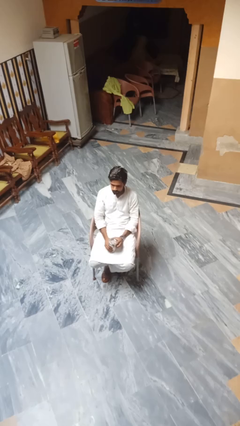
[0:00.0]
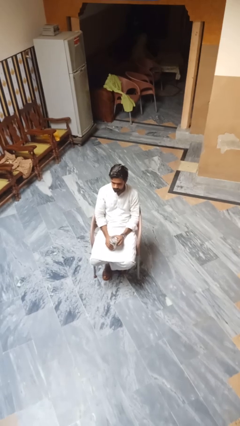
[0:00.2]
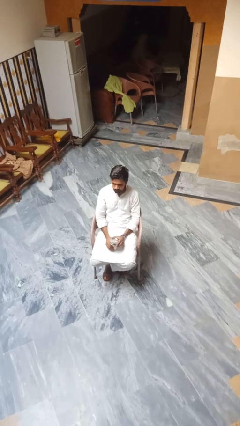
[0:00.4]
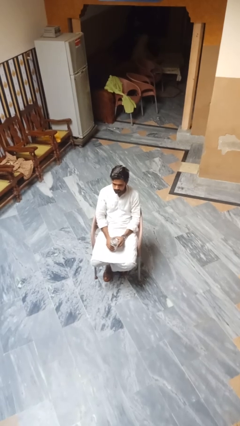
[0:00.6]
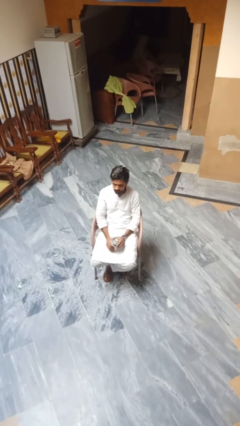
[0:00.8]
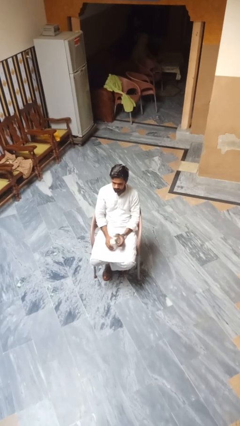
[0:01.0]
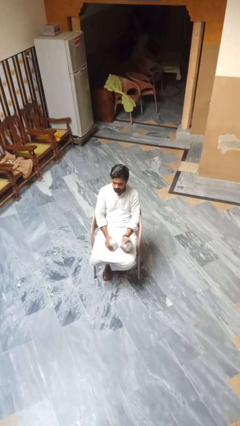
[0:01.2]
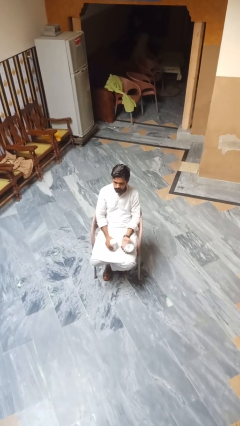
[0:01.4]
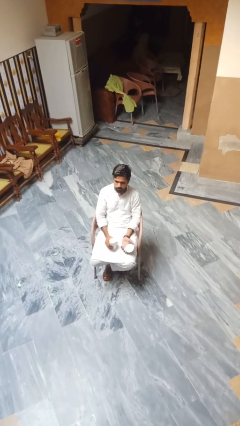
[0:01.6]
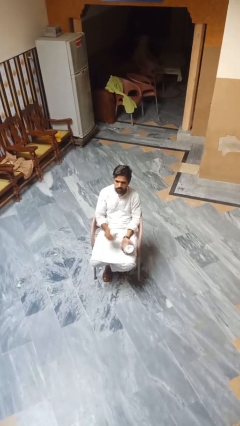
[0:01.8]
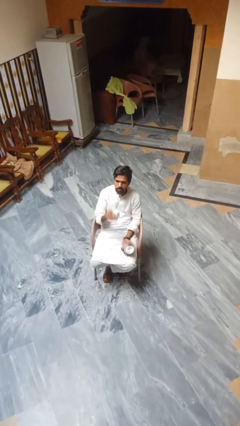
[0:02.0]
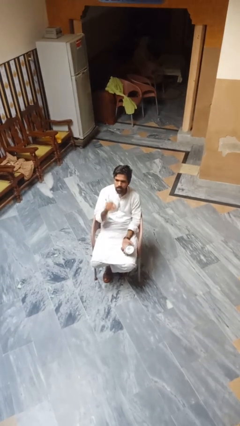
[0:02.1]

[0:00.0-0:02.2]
person opens beverage can

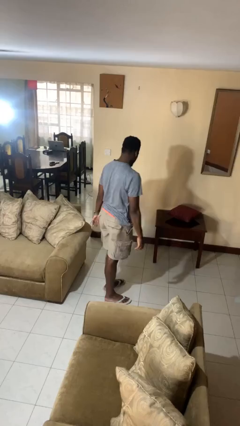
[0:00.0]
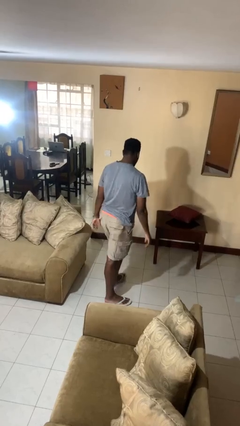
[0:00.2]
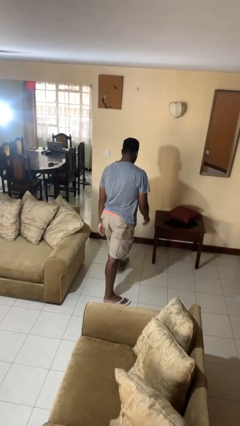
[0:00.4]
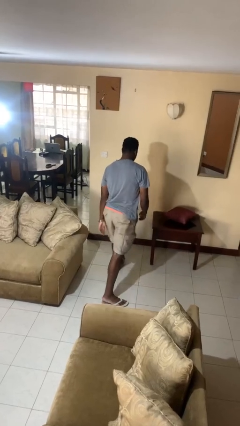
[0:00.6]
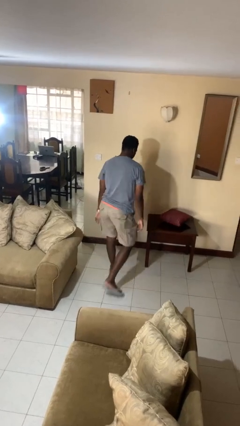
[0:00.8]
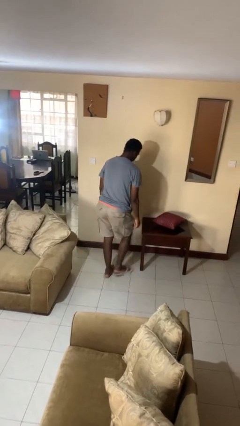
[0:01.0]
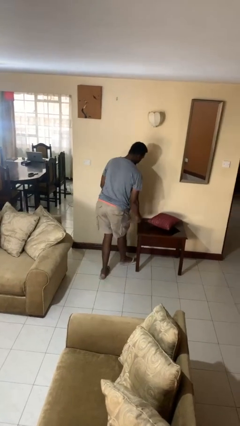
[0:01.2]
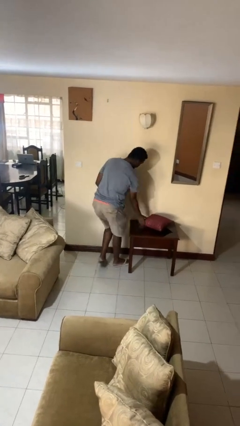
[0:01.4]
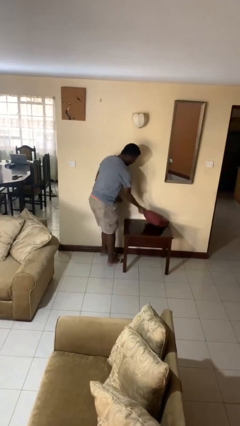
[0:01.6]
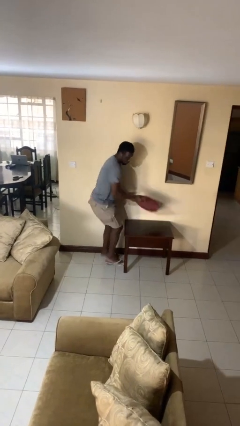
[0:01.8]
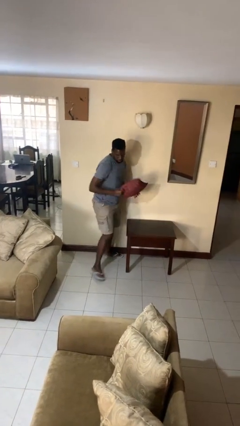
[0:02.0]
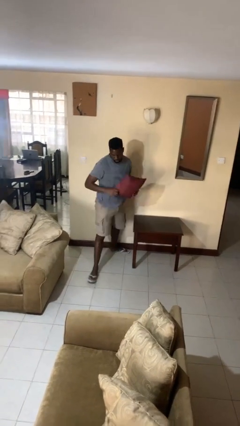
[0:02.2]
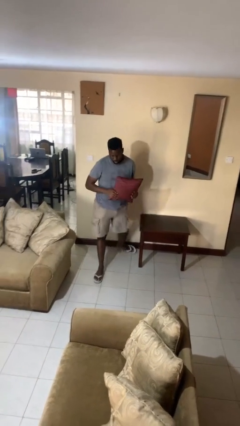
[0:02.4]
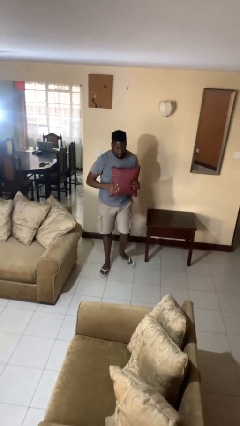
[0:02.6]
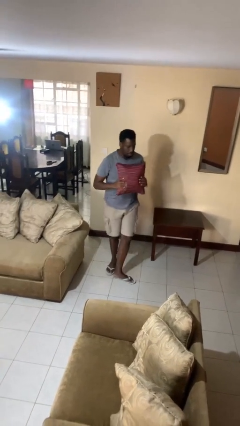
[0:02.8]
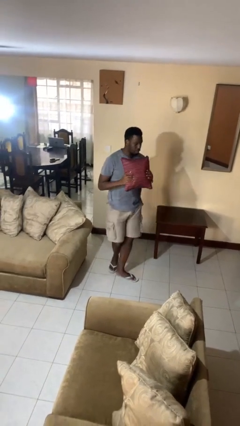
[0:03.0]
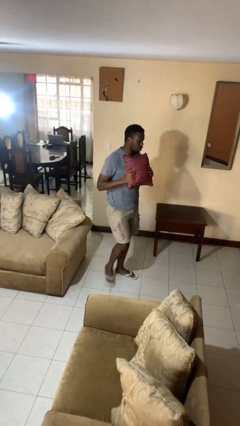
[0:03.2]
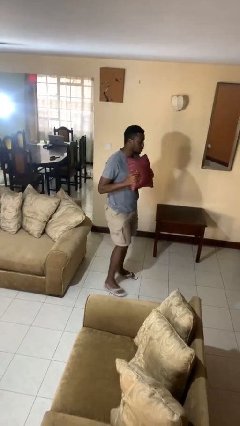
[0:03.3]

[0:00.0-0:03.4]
person picks up object from table

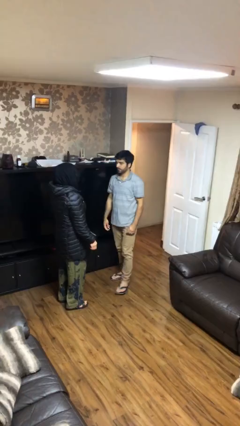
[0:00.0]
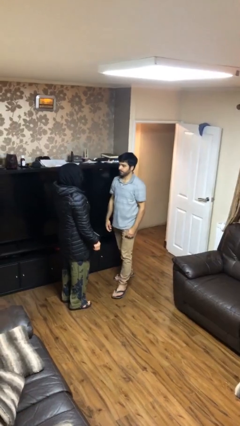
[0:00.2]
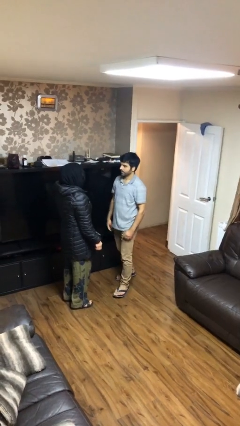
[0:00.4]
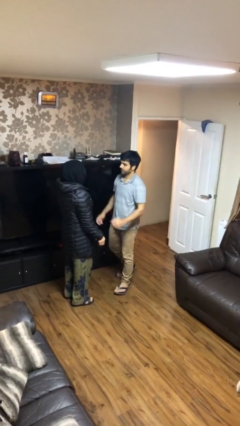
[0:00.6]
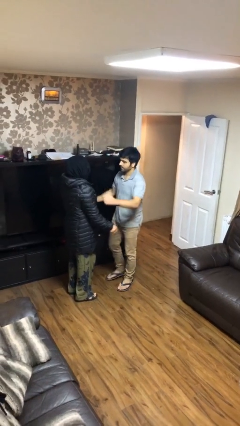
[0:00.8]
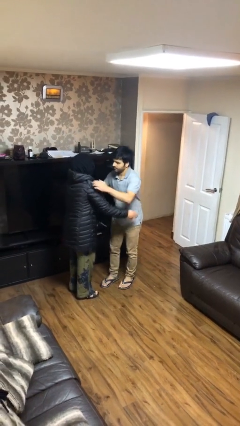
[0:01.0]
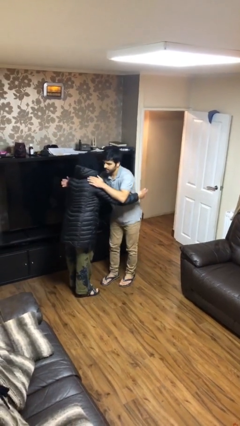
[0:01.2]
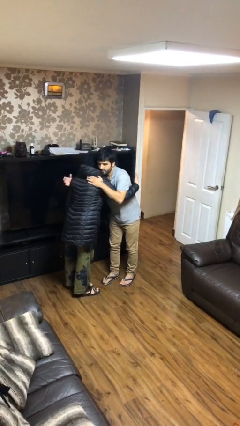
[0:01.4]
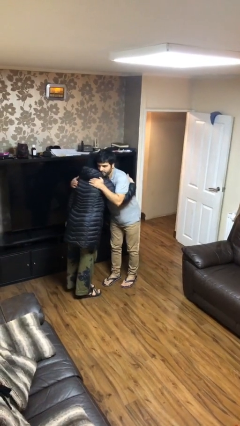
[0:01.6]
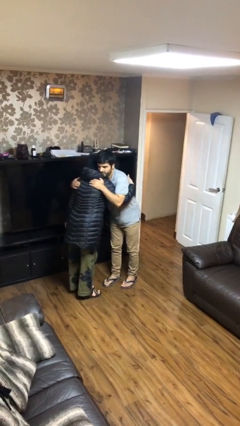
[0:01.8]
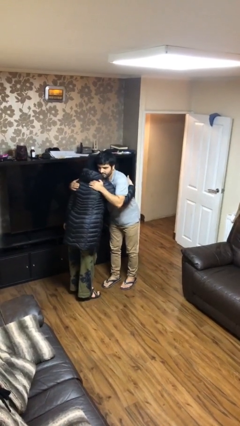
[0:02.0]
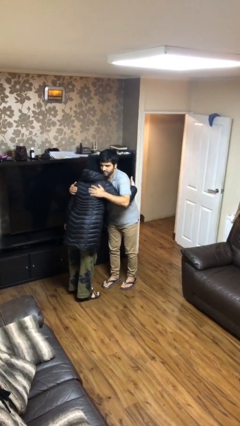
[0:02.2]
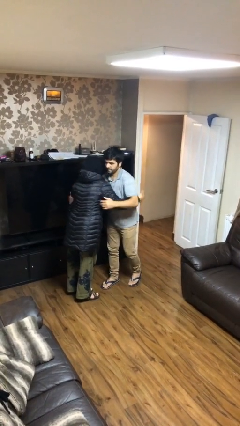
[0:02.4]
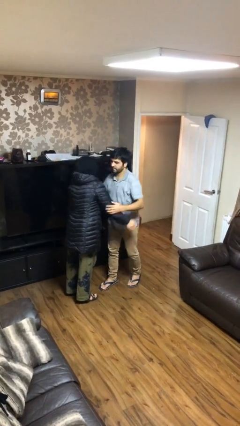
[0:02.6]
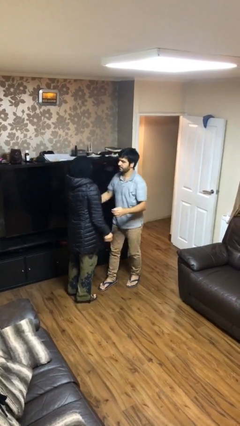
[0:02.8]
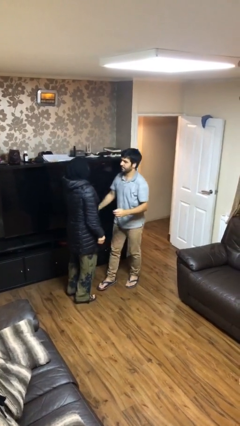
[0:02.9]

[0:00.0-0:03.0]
person embraces person

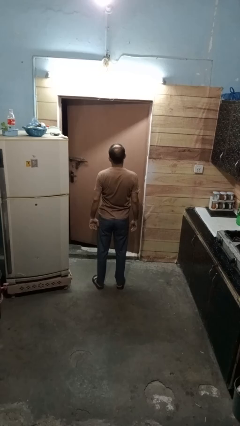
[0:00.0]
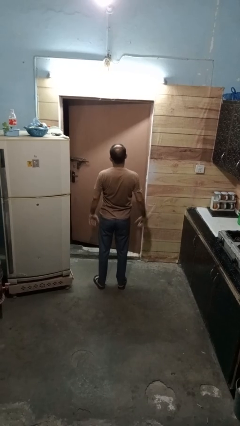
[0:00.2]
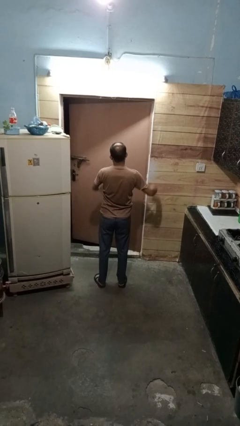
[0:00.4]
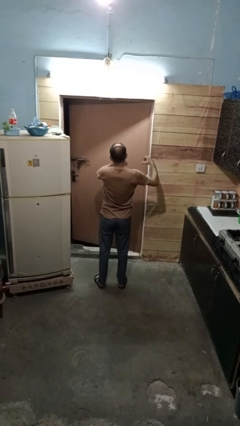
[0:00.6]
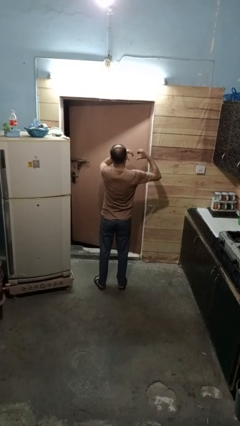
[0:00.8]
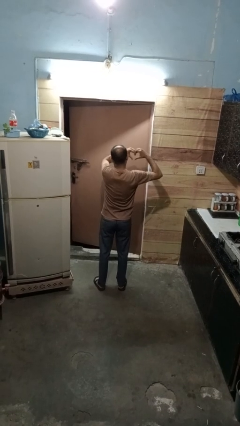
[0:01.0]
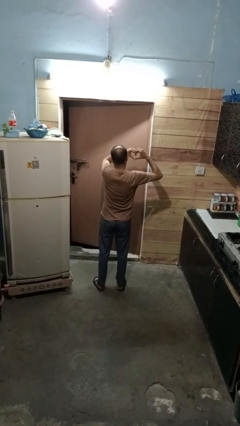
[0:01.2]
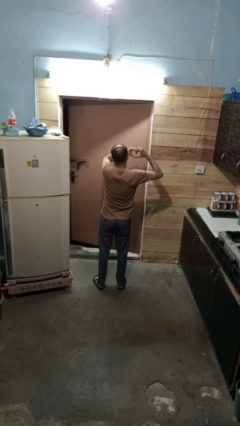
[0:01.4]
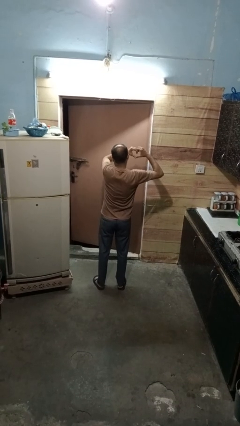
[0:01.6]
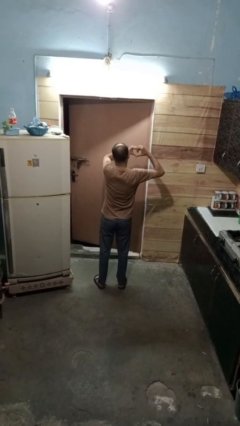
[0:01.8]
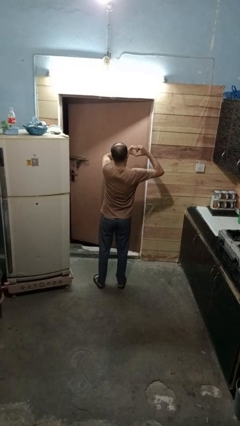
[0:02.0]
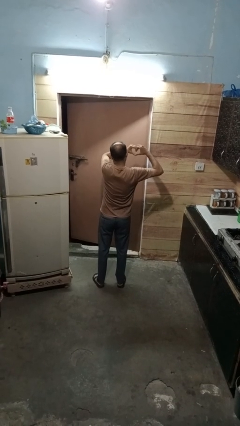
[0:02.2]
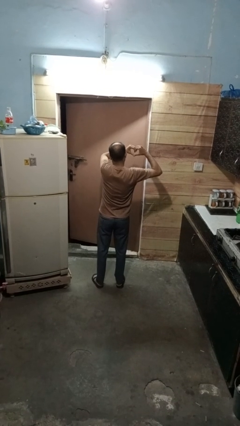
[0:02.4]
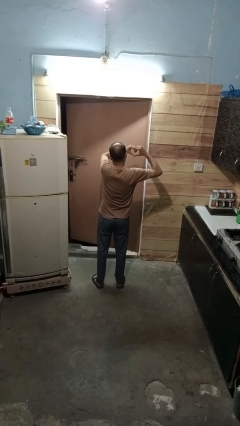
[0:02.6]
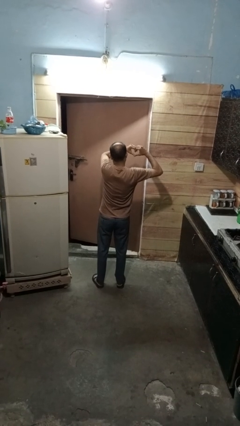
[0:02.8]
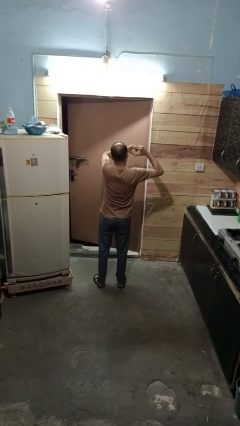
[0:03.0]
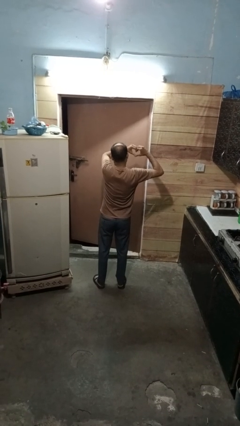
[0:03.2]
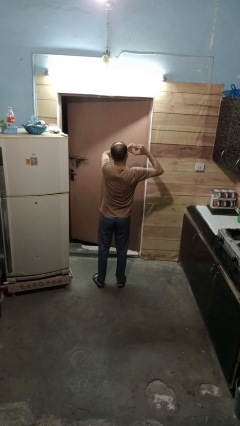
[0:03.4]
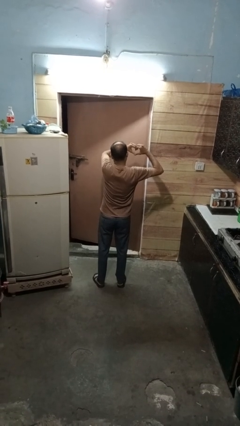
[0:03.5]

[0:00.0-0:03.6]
person gestures heart

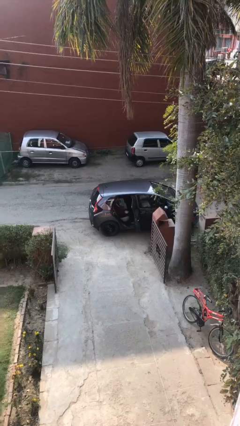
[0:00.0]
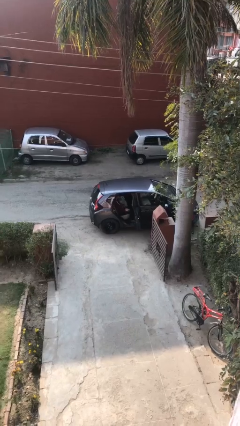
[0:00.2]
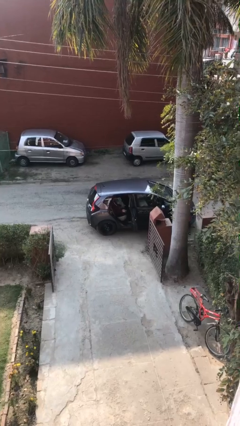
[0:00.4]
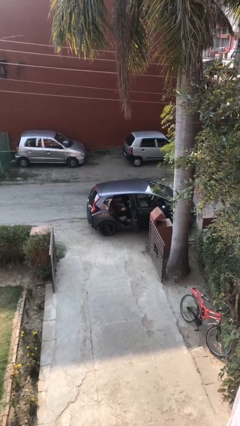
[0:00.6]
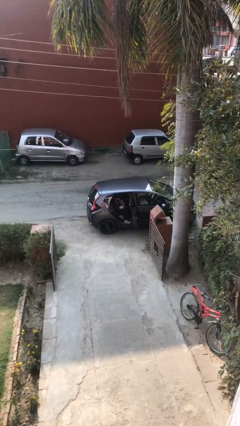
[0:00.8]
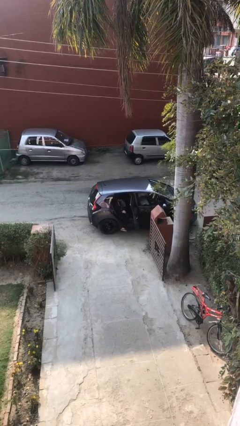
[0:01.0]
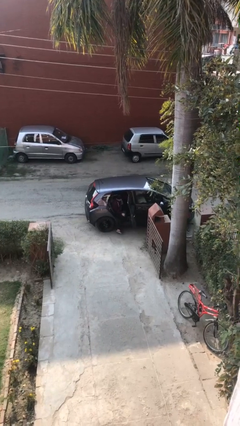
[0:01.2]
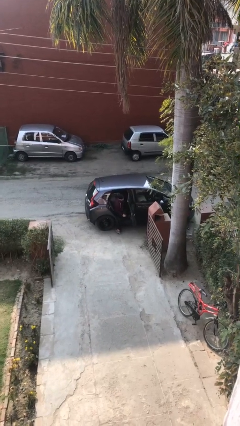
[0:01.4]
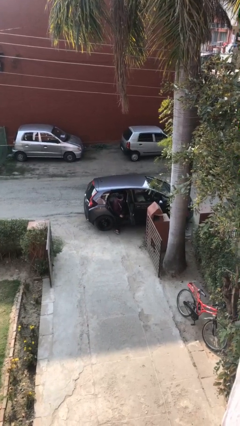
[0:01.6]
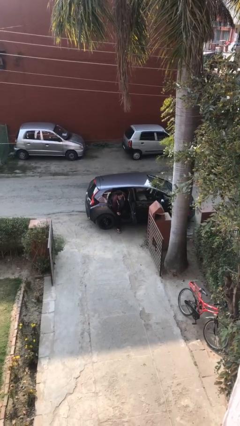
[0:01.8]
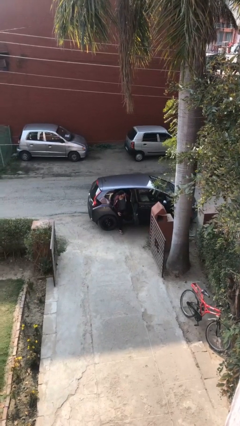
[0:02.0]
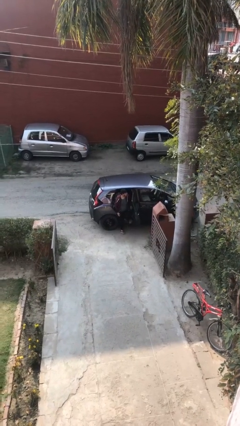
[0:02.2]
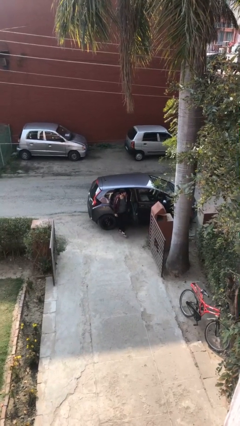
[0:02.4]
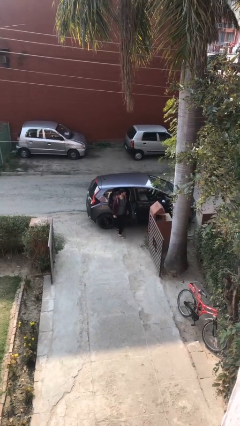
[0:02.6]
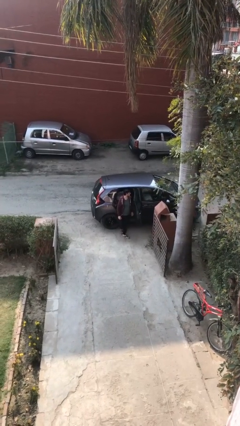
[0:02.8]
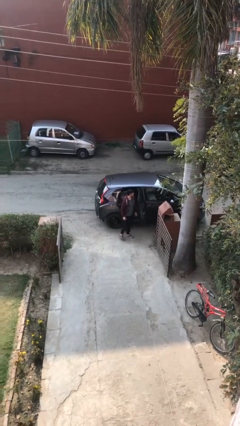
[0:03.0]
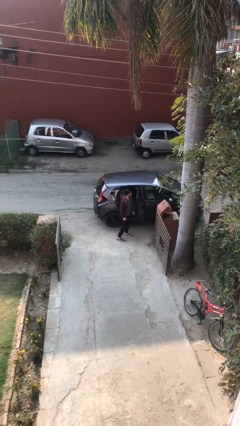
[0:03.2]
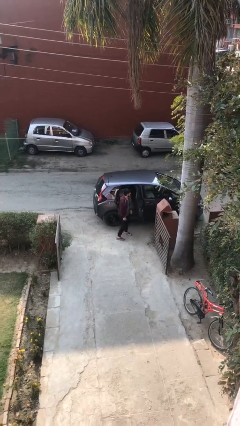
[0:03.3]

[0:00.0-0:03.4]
person exits car

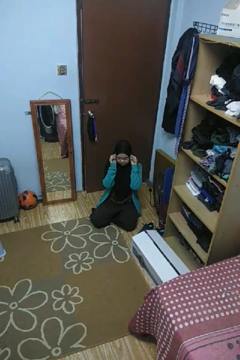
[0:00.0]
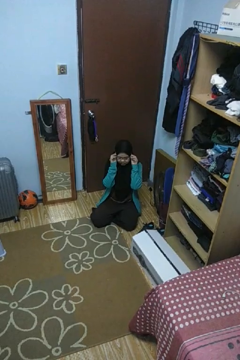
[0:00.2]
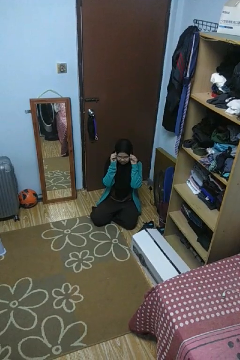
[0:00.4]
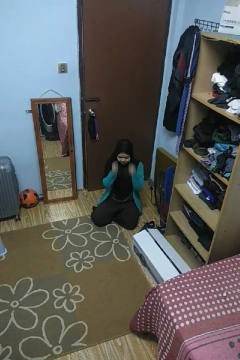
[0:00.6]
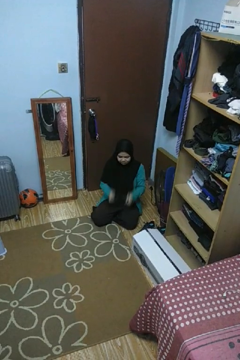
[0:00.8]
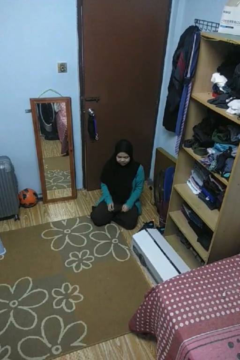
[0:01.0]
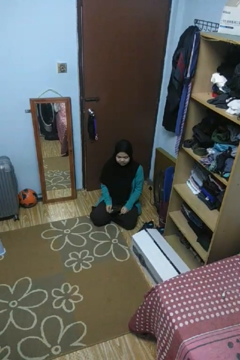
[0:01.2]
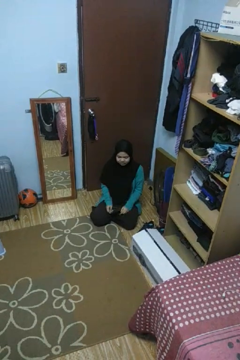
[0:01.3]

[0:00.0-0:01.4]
person takes off glasses

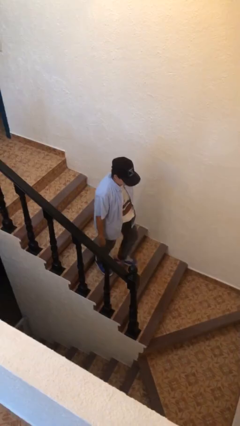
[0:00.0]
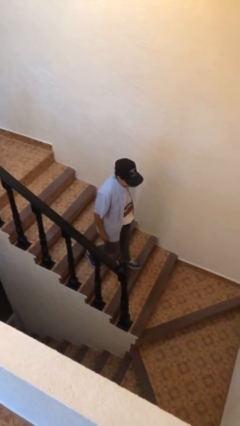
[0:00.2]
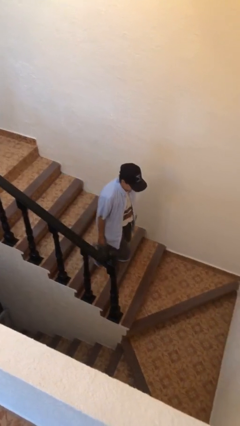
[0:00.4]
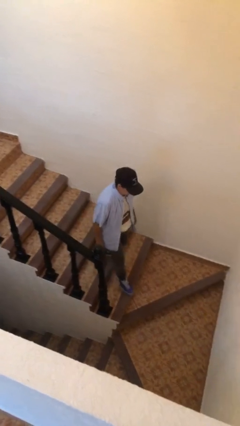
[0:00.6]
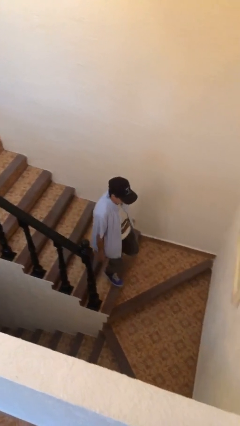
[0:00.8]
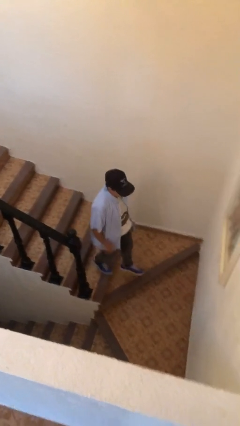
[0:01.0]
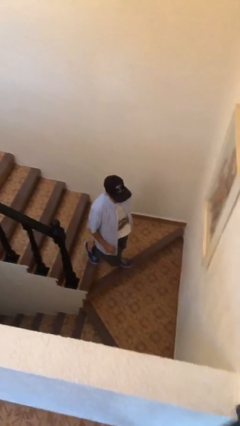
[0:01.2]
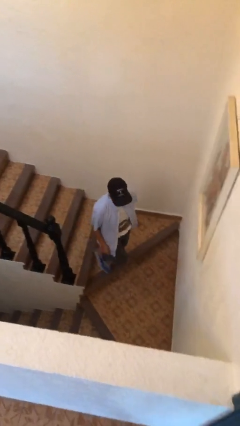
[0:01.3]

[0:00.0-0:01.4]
person climbs down stairs
